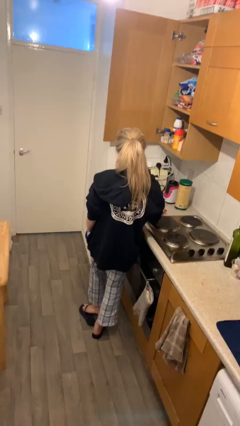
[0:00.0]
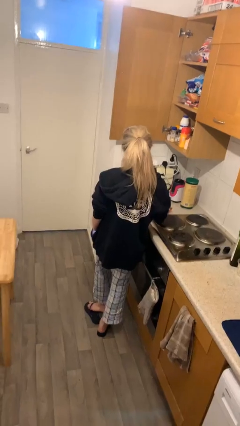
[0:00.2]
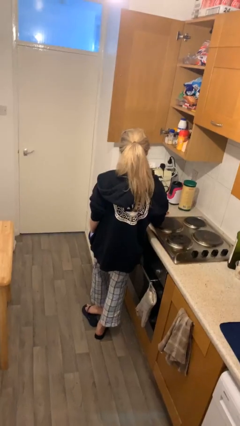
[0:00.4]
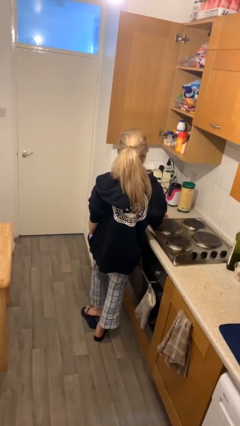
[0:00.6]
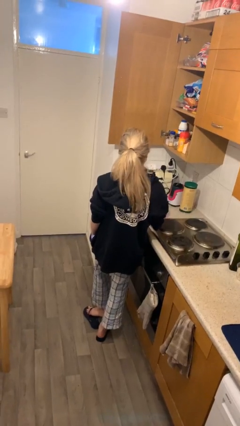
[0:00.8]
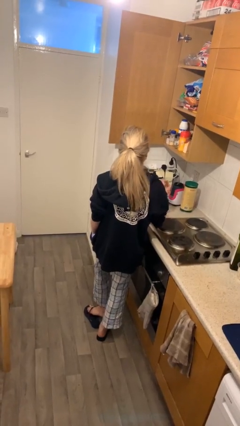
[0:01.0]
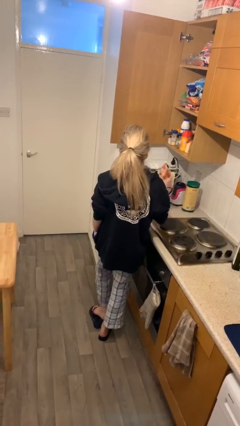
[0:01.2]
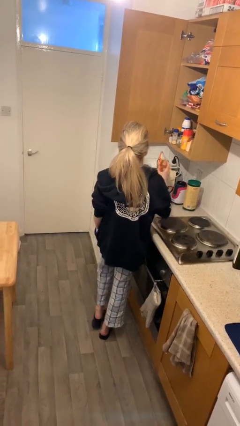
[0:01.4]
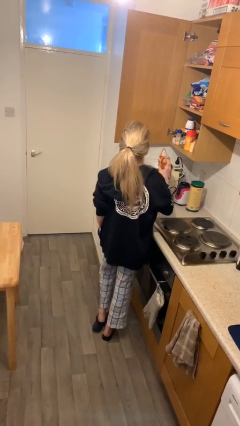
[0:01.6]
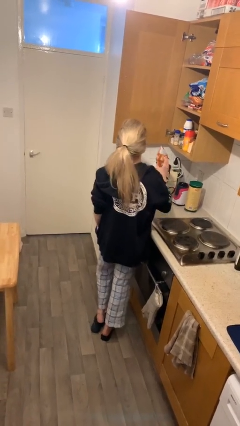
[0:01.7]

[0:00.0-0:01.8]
person picks up object from table

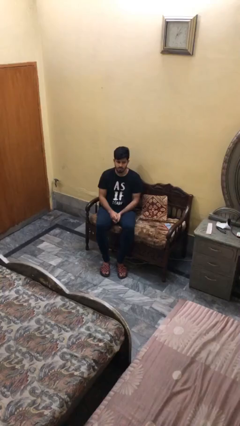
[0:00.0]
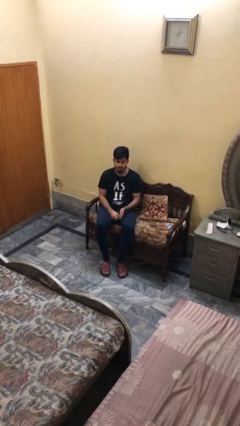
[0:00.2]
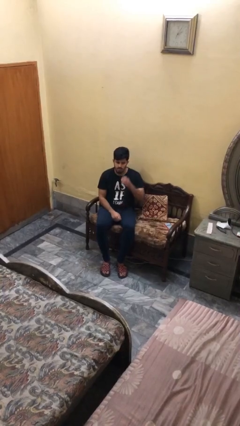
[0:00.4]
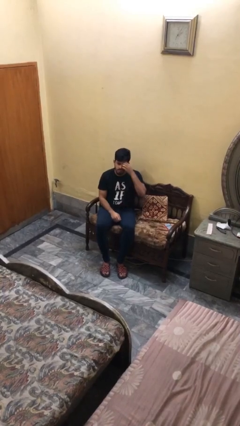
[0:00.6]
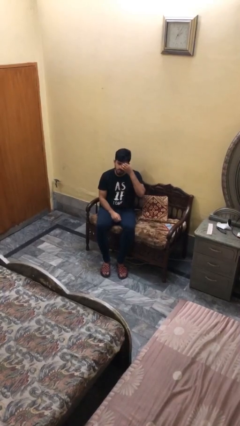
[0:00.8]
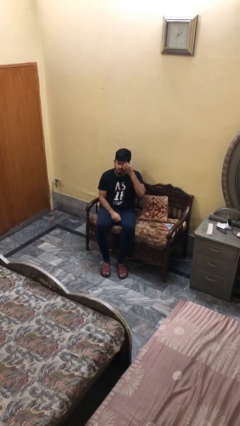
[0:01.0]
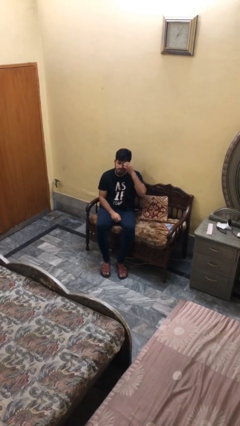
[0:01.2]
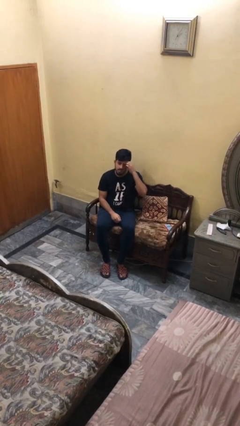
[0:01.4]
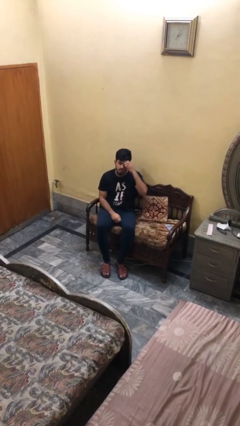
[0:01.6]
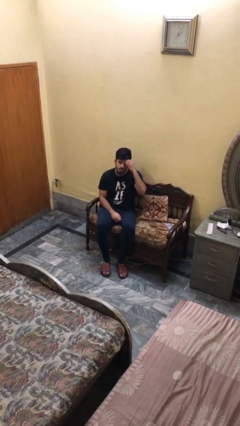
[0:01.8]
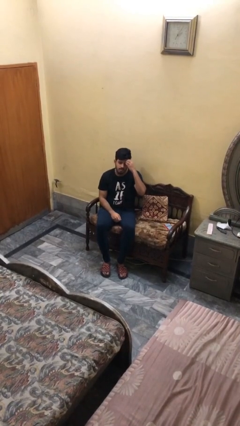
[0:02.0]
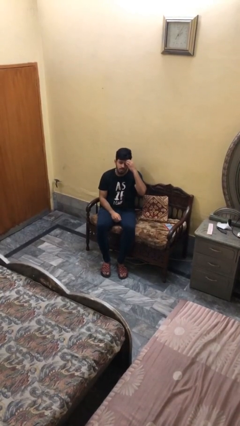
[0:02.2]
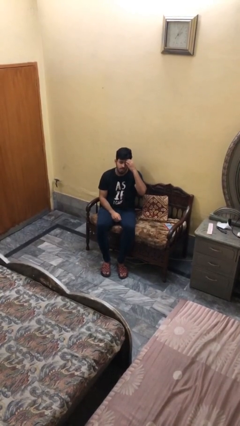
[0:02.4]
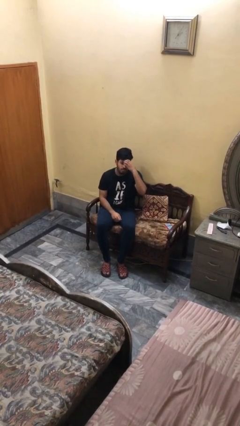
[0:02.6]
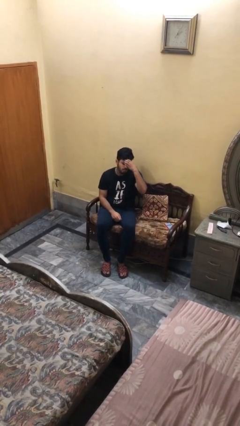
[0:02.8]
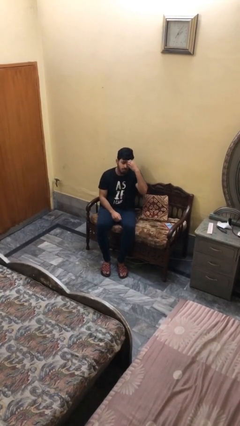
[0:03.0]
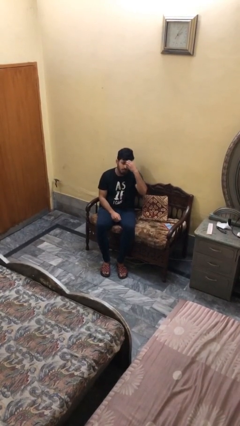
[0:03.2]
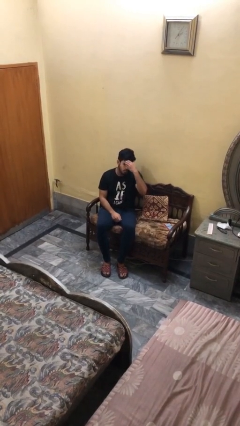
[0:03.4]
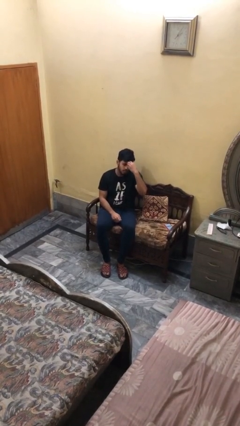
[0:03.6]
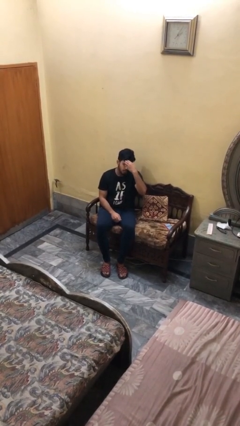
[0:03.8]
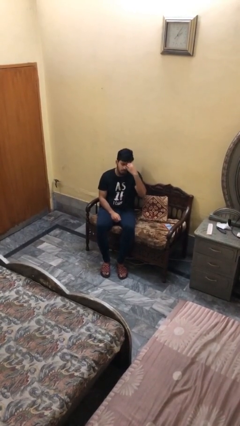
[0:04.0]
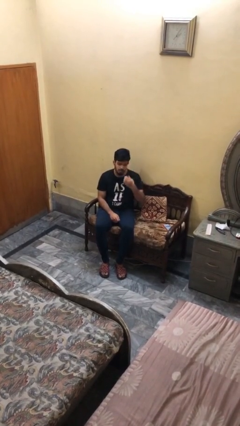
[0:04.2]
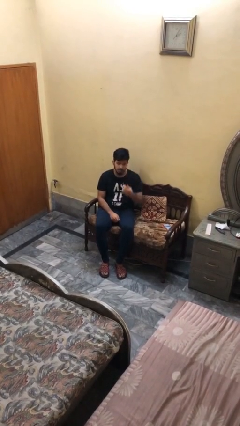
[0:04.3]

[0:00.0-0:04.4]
person scratches face

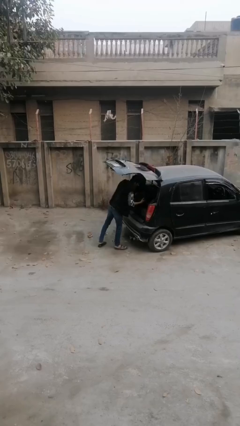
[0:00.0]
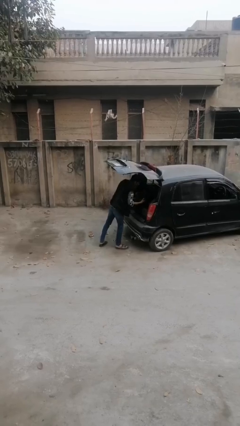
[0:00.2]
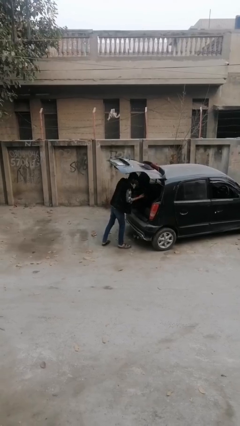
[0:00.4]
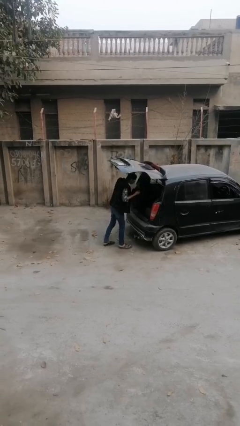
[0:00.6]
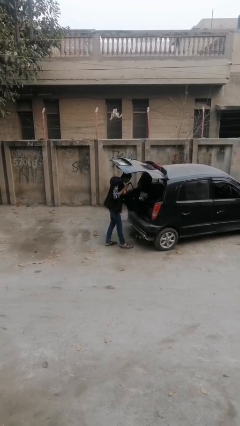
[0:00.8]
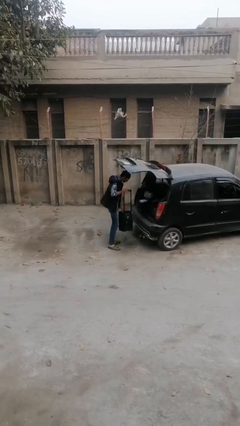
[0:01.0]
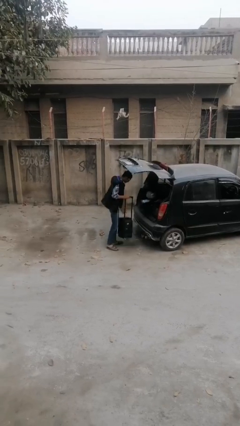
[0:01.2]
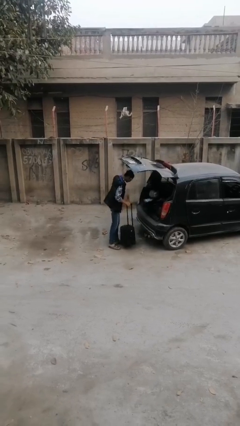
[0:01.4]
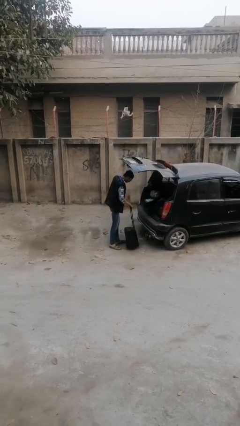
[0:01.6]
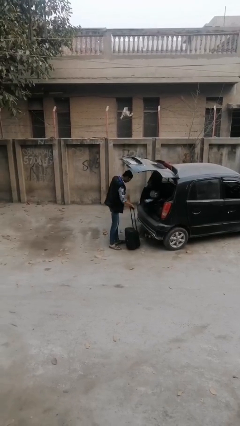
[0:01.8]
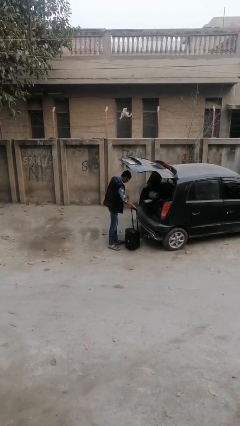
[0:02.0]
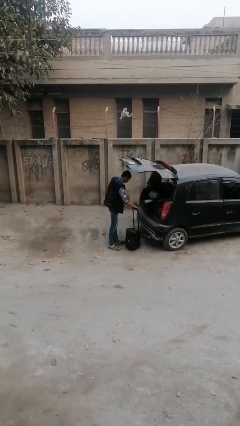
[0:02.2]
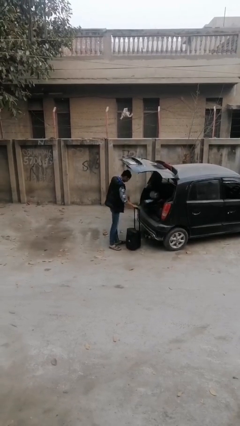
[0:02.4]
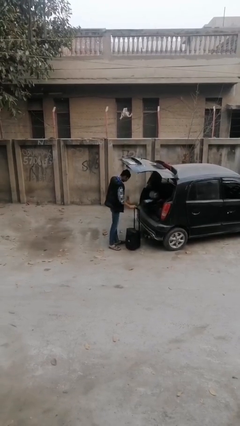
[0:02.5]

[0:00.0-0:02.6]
person unloads car

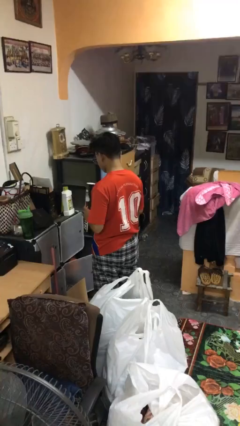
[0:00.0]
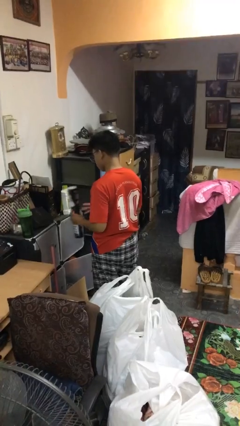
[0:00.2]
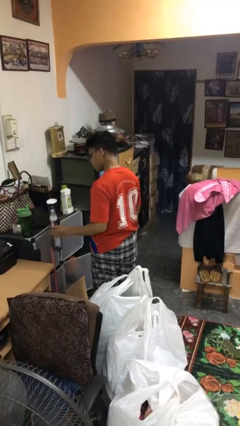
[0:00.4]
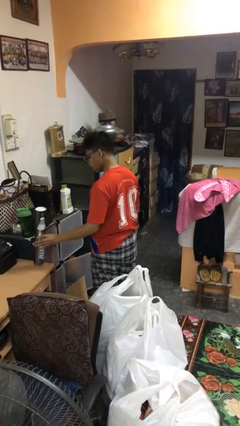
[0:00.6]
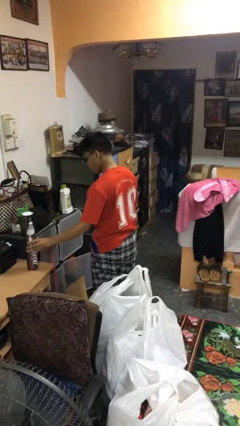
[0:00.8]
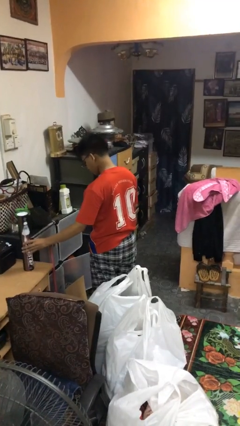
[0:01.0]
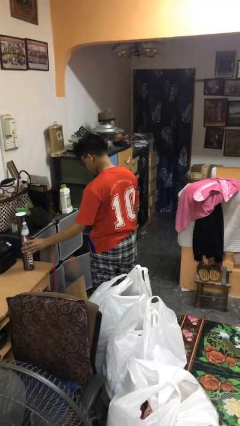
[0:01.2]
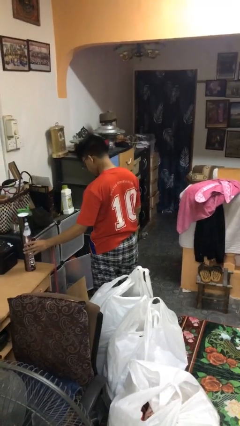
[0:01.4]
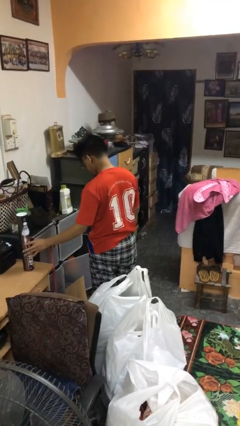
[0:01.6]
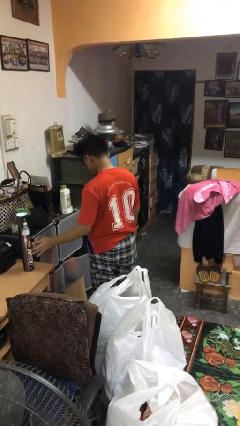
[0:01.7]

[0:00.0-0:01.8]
person puts down object on countertop

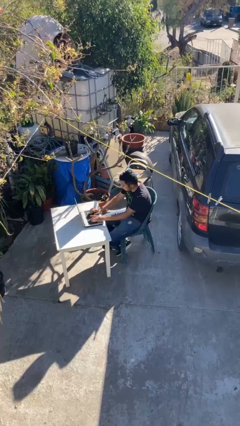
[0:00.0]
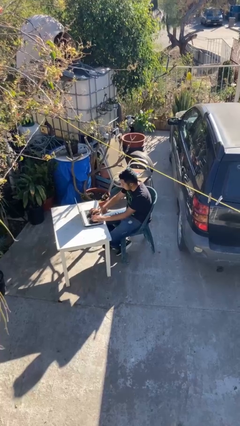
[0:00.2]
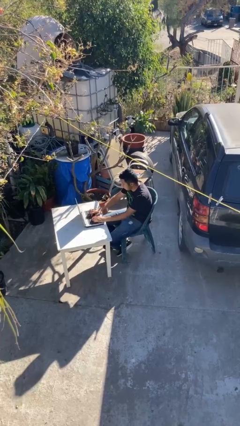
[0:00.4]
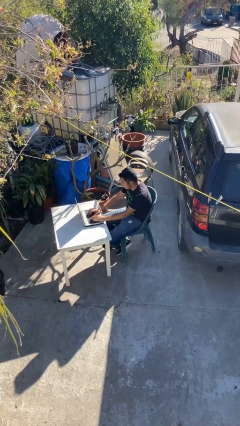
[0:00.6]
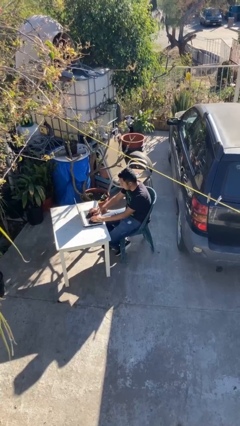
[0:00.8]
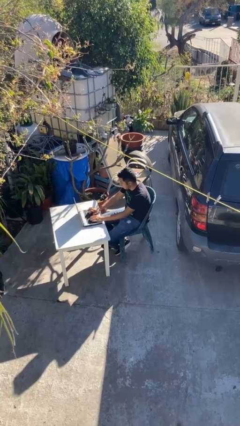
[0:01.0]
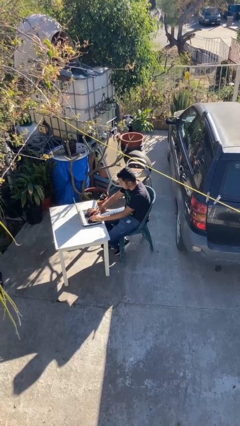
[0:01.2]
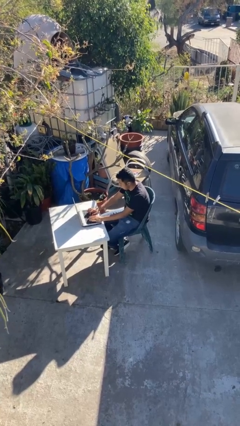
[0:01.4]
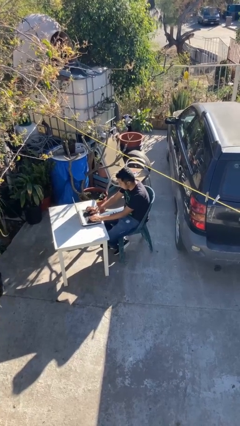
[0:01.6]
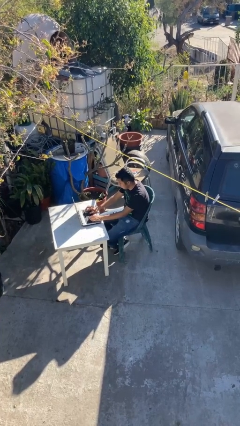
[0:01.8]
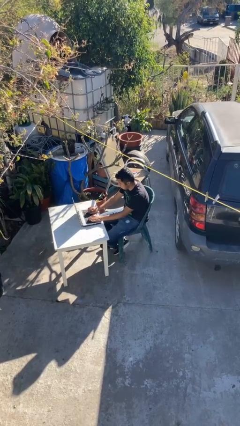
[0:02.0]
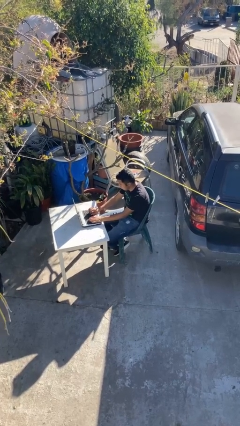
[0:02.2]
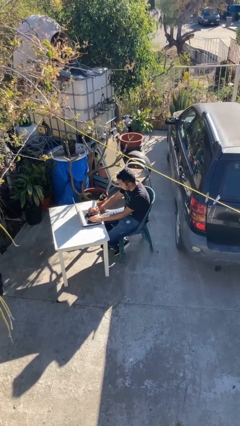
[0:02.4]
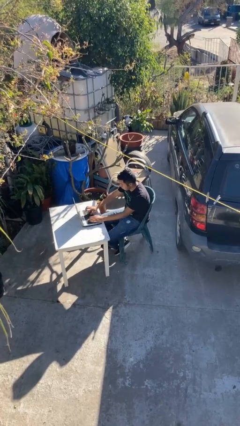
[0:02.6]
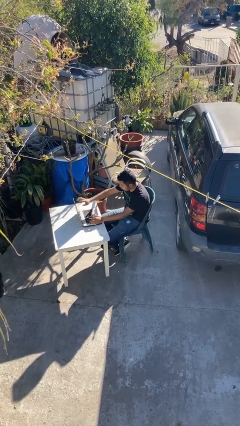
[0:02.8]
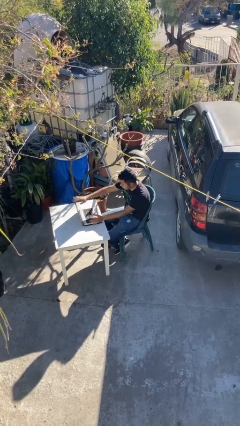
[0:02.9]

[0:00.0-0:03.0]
person interacts with laptop

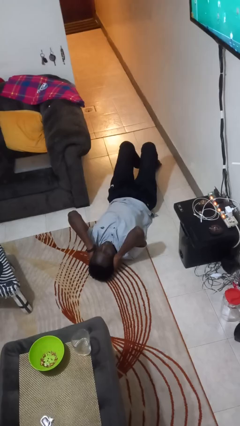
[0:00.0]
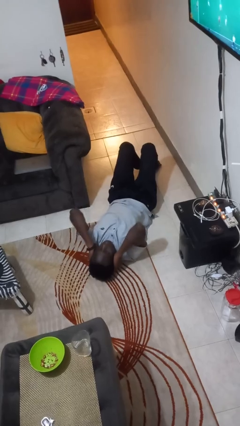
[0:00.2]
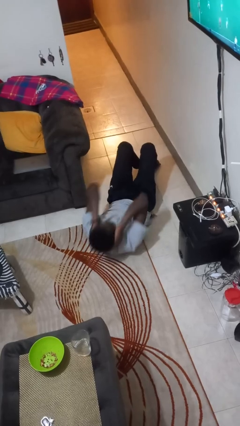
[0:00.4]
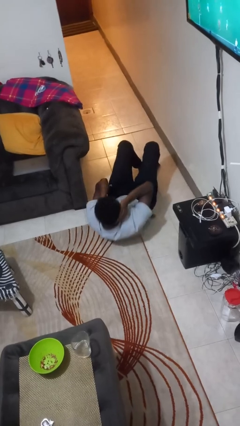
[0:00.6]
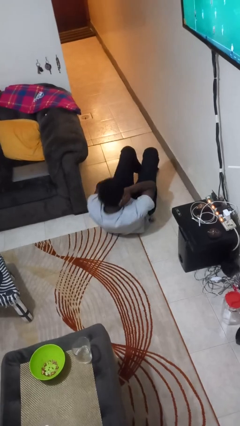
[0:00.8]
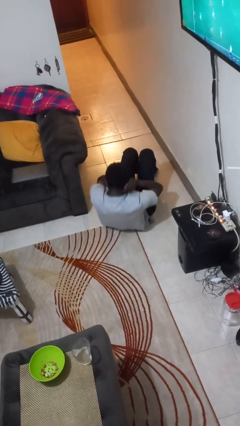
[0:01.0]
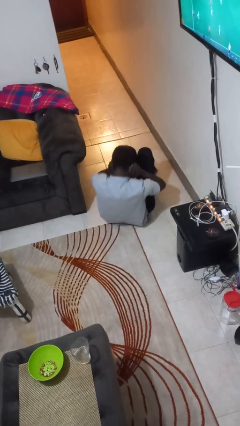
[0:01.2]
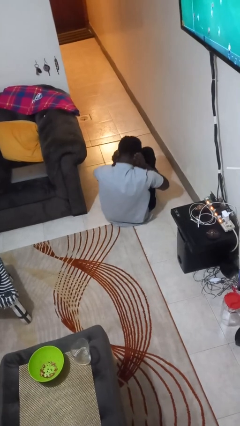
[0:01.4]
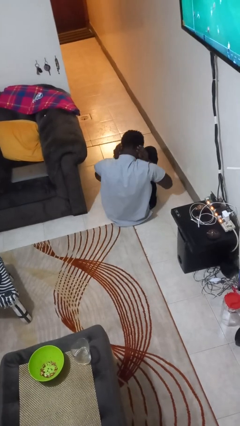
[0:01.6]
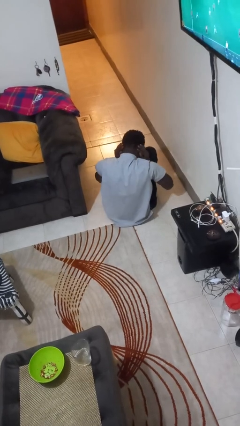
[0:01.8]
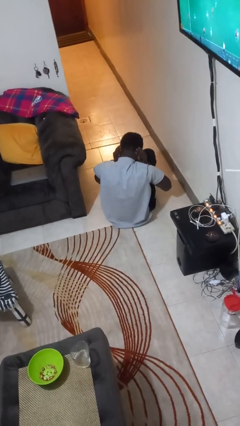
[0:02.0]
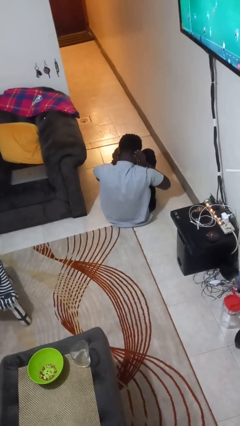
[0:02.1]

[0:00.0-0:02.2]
person exercises with situp

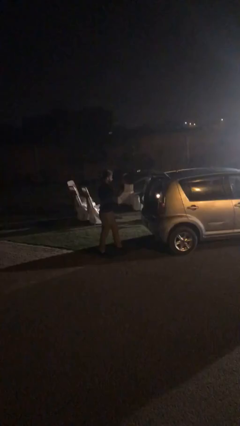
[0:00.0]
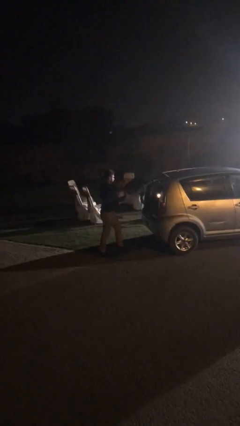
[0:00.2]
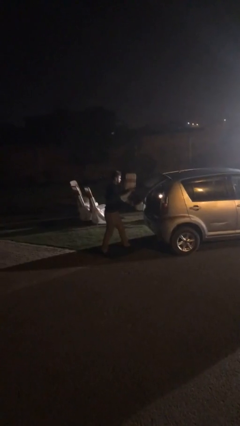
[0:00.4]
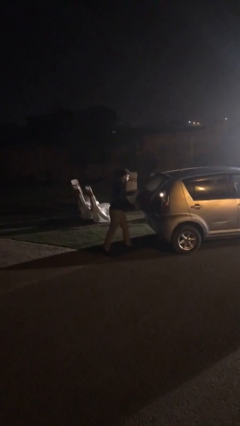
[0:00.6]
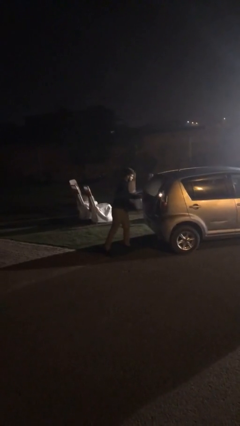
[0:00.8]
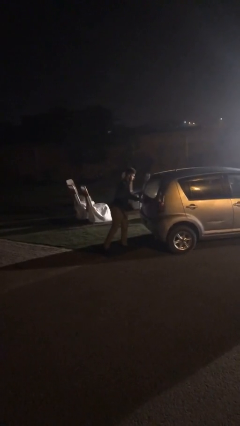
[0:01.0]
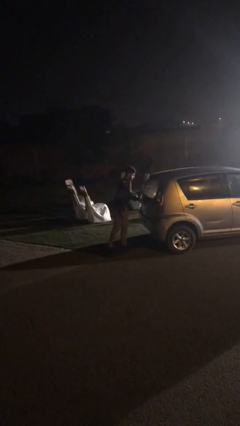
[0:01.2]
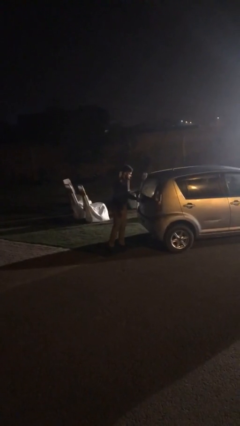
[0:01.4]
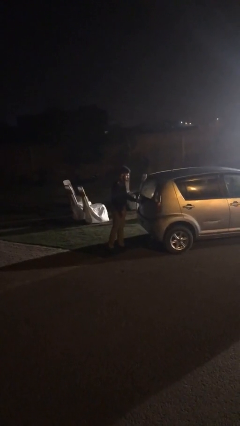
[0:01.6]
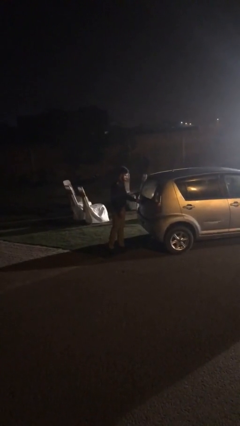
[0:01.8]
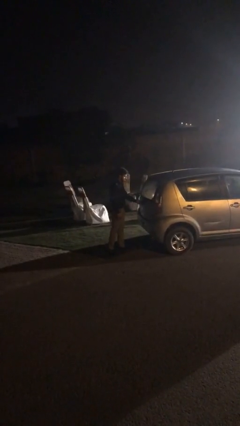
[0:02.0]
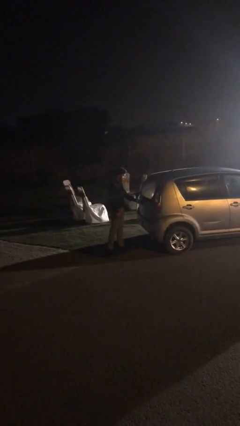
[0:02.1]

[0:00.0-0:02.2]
person closes car trunk
